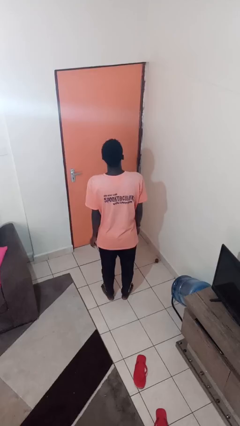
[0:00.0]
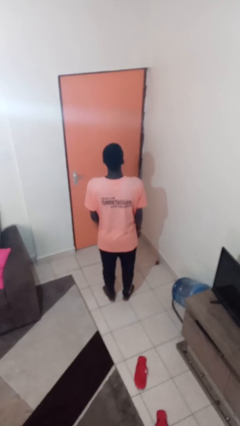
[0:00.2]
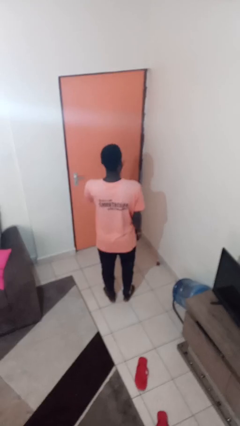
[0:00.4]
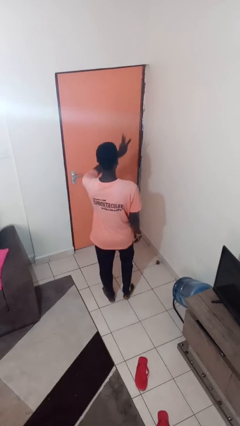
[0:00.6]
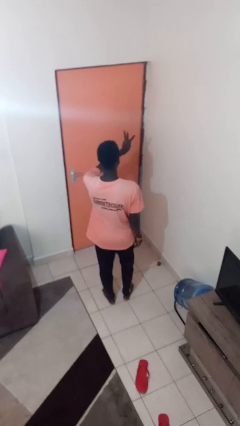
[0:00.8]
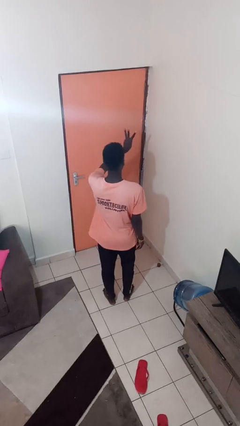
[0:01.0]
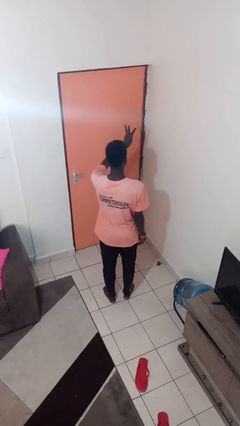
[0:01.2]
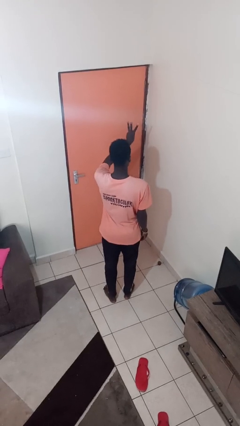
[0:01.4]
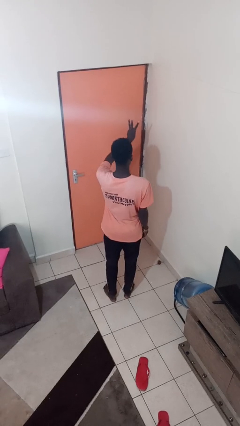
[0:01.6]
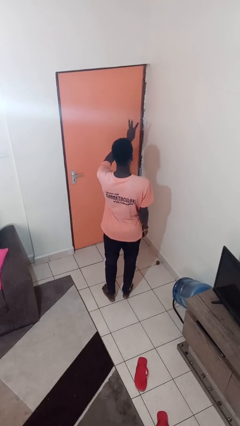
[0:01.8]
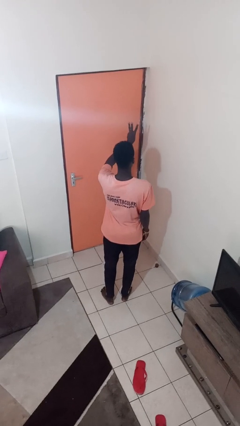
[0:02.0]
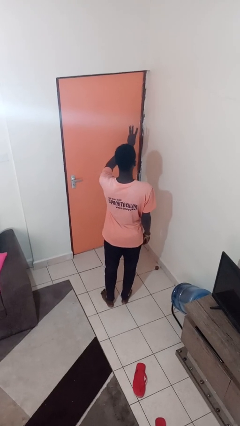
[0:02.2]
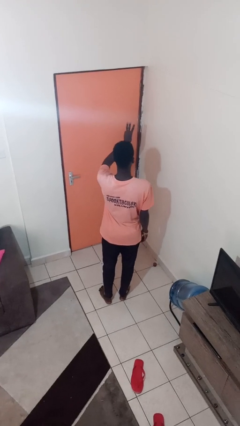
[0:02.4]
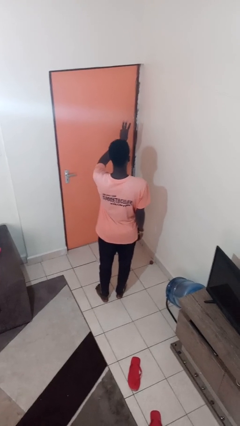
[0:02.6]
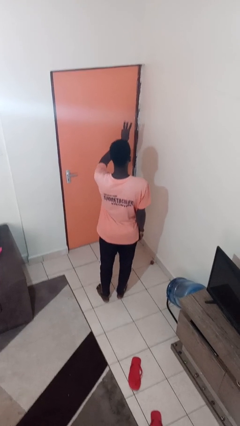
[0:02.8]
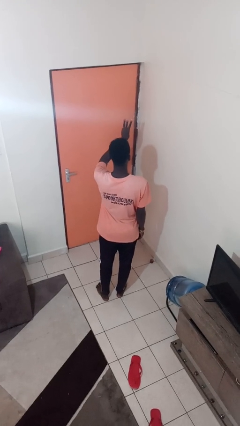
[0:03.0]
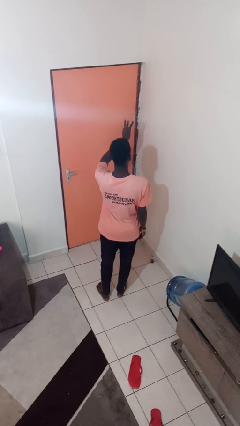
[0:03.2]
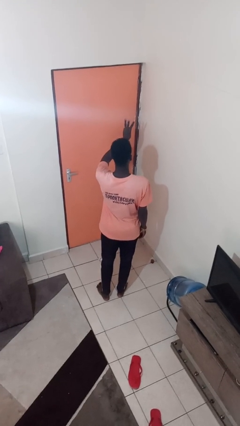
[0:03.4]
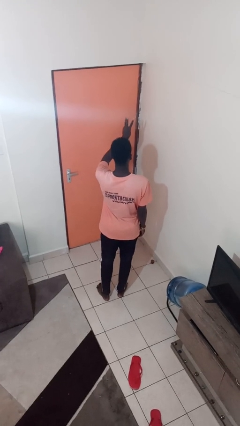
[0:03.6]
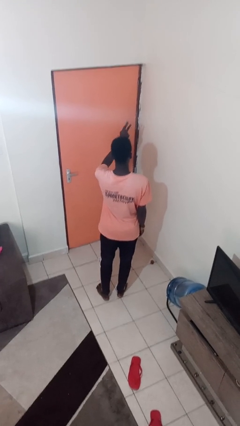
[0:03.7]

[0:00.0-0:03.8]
person gestures number three

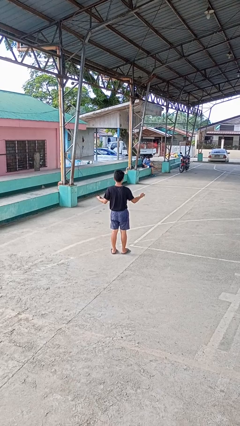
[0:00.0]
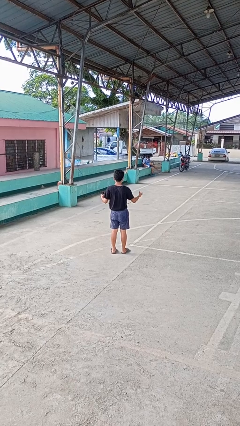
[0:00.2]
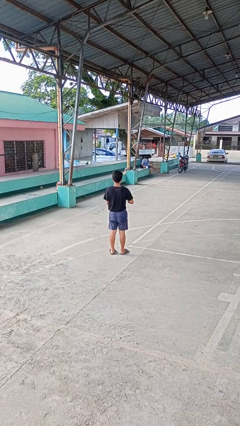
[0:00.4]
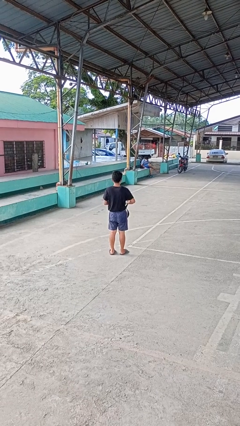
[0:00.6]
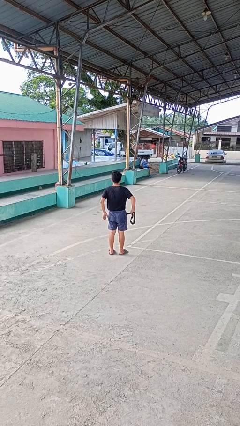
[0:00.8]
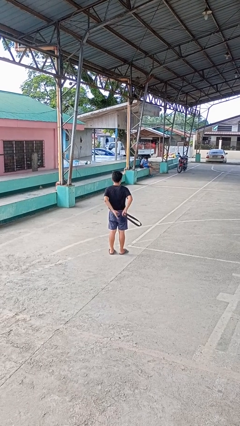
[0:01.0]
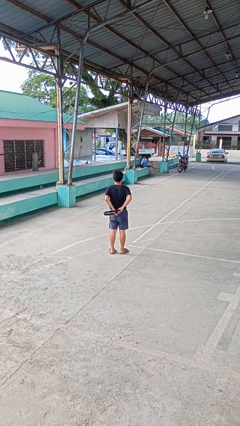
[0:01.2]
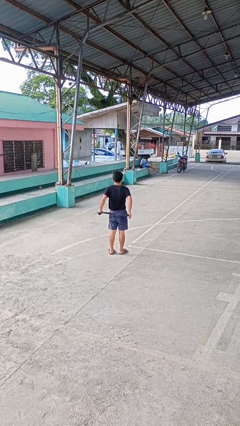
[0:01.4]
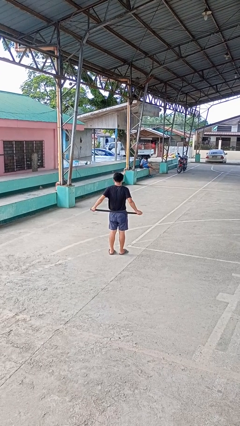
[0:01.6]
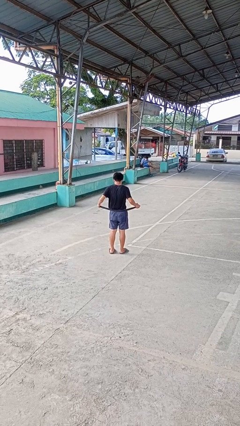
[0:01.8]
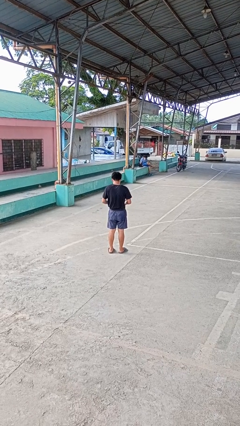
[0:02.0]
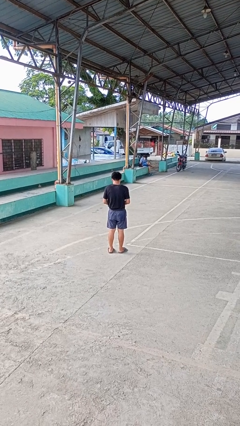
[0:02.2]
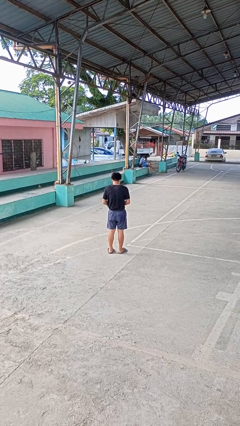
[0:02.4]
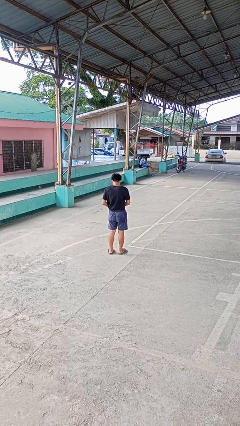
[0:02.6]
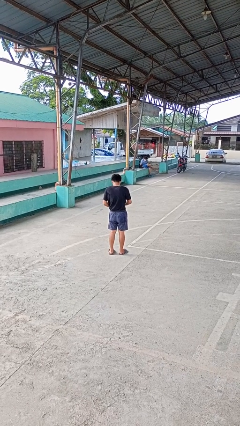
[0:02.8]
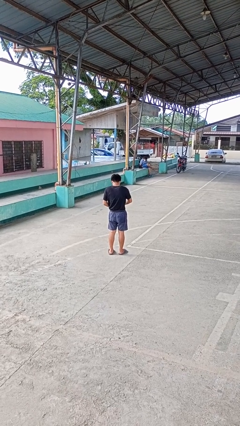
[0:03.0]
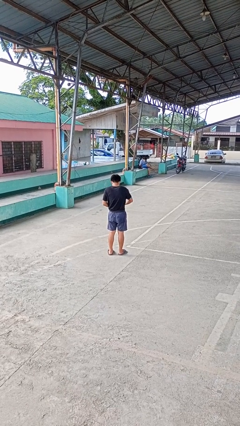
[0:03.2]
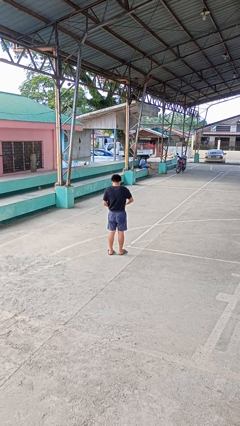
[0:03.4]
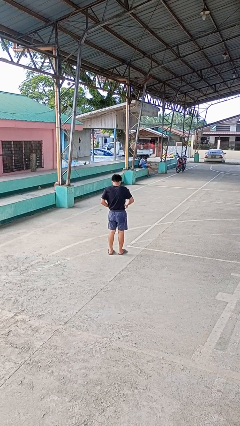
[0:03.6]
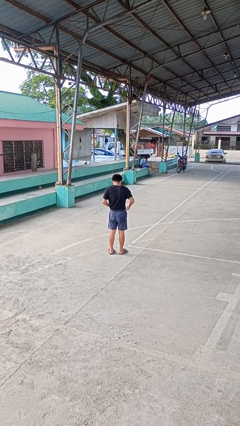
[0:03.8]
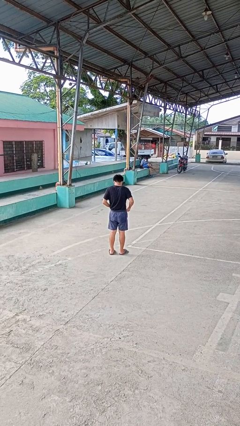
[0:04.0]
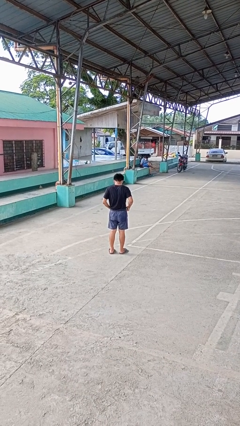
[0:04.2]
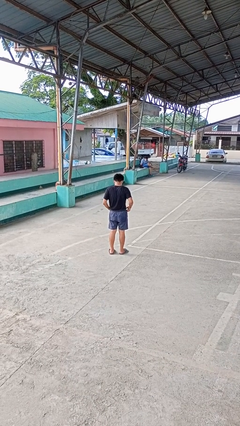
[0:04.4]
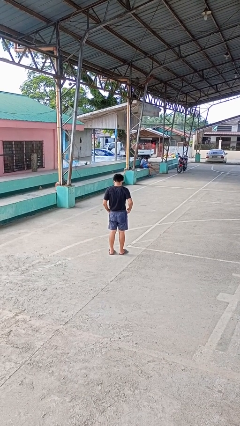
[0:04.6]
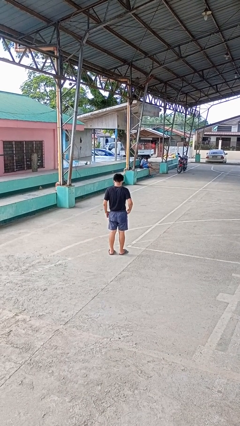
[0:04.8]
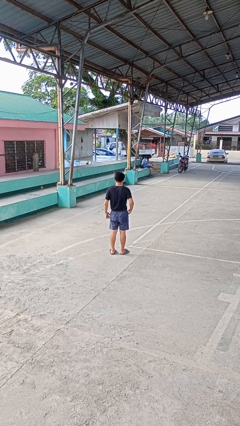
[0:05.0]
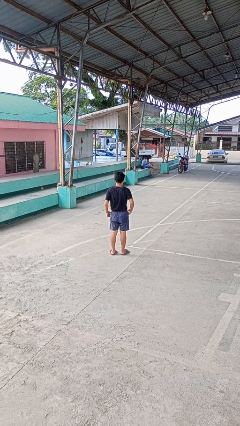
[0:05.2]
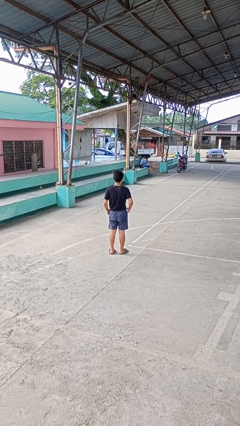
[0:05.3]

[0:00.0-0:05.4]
person puts on belt

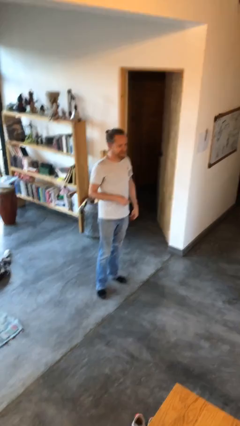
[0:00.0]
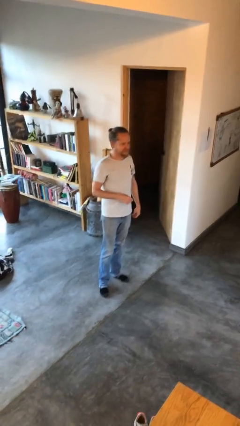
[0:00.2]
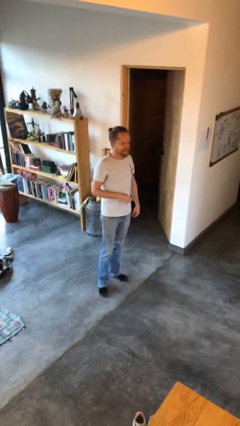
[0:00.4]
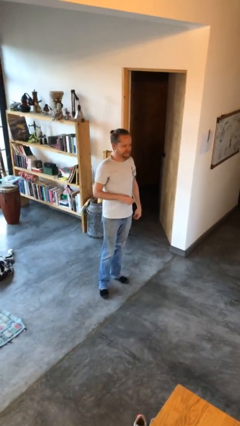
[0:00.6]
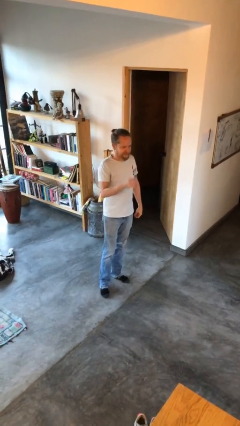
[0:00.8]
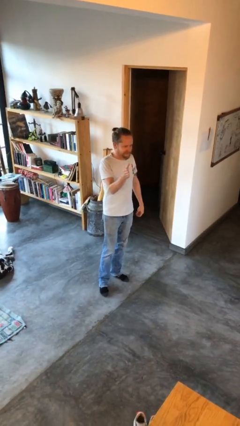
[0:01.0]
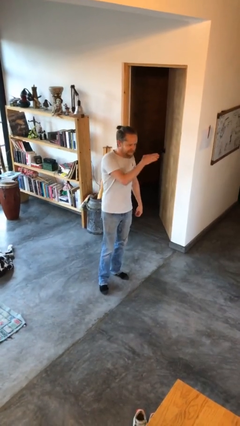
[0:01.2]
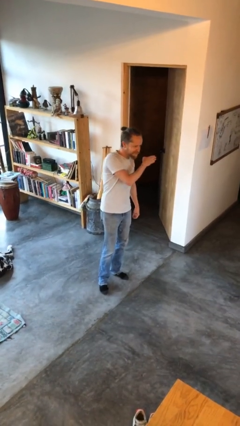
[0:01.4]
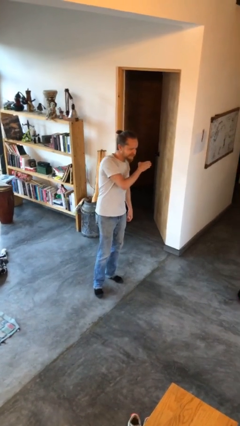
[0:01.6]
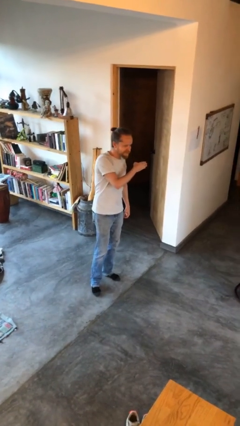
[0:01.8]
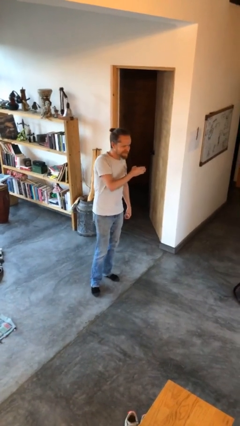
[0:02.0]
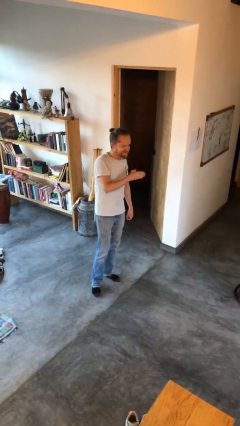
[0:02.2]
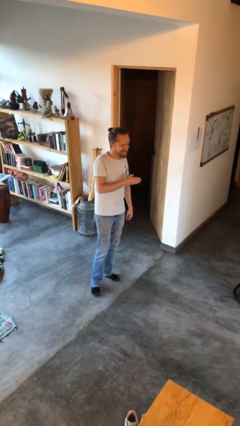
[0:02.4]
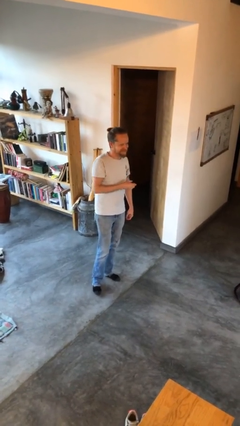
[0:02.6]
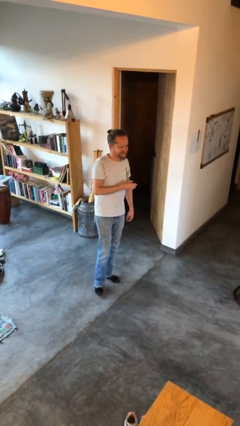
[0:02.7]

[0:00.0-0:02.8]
person gestures swipe left

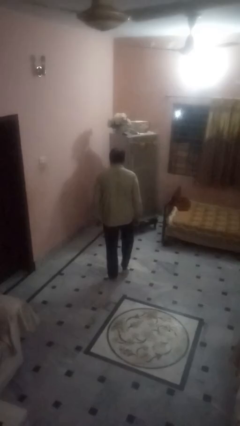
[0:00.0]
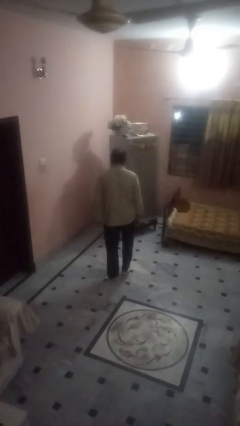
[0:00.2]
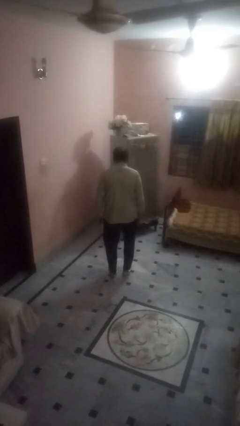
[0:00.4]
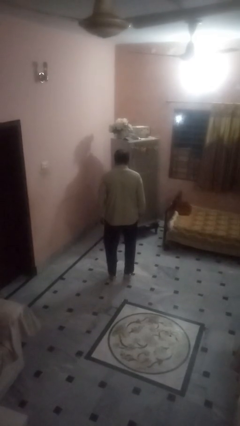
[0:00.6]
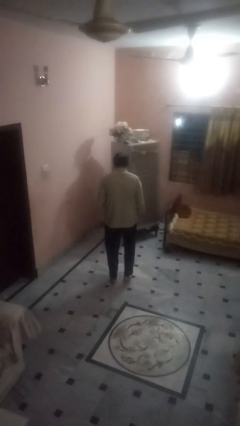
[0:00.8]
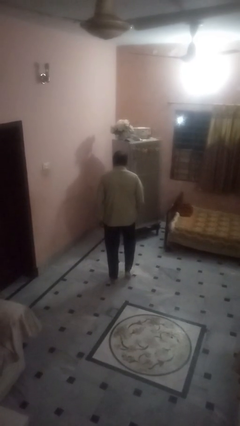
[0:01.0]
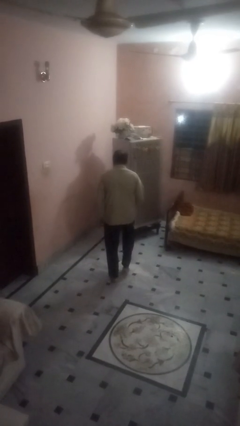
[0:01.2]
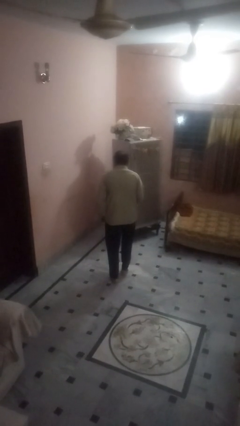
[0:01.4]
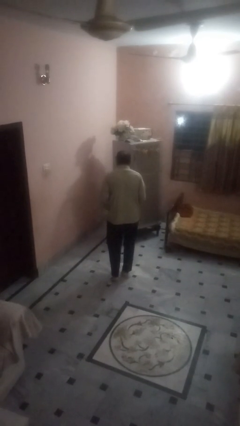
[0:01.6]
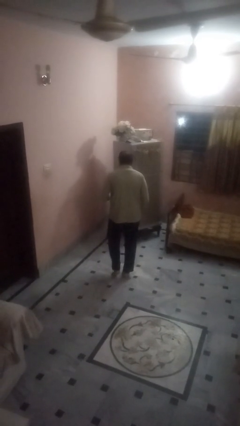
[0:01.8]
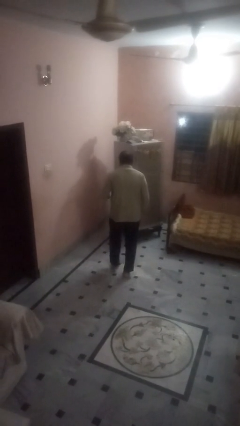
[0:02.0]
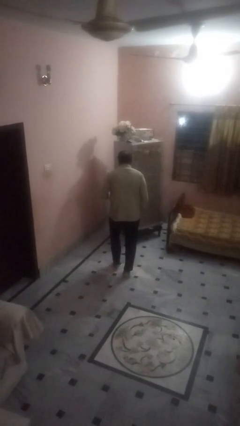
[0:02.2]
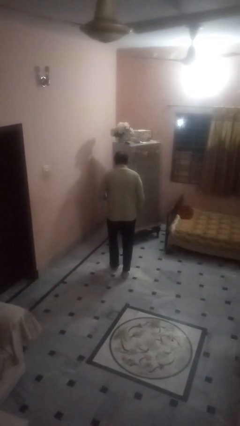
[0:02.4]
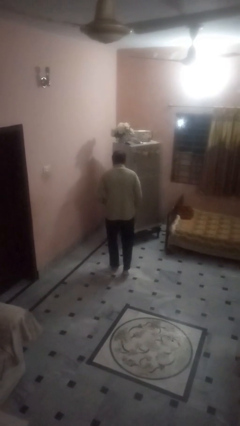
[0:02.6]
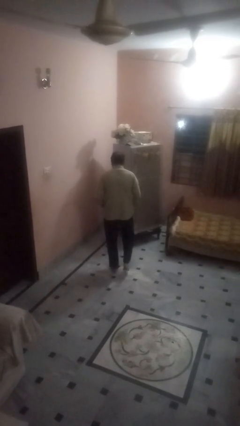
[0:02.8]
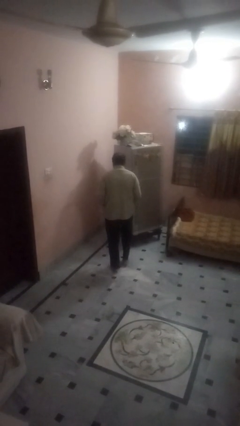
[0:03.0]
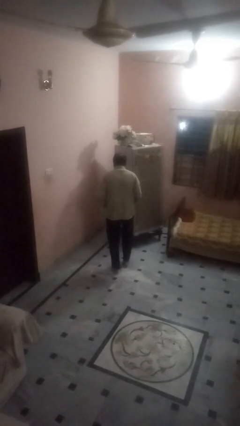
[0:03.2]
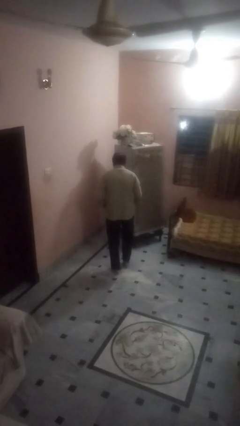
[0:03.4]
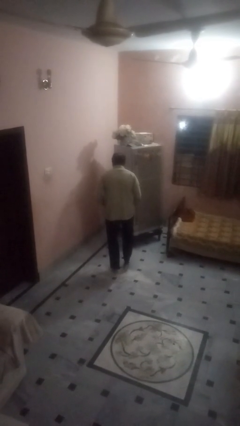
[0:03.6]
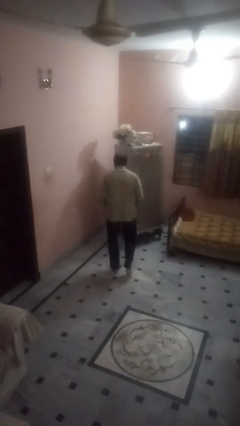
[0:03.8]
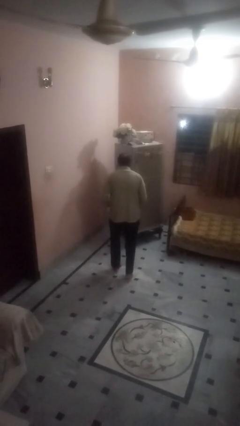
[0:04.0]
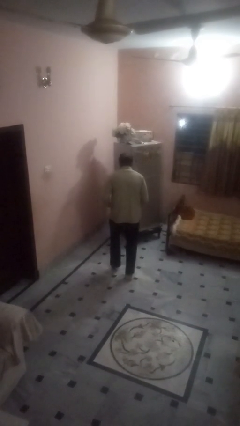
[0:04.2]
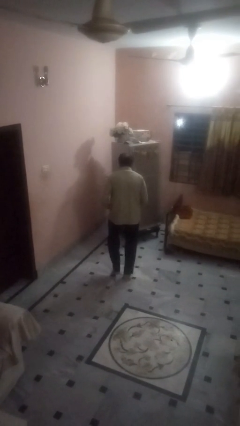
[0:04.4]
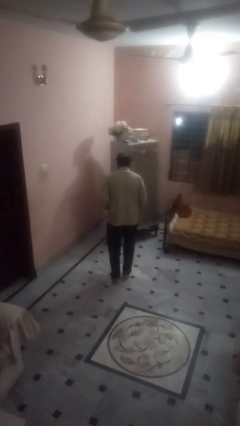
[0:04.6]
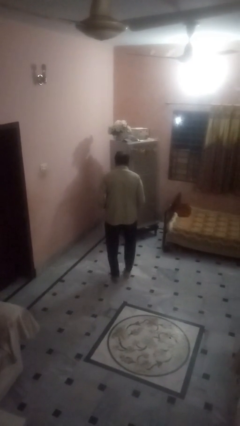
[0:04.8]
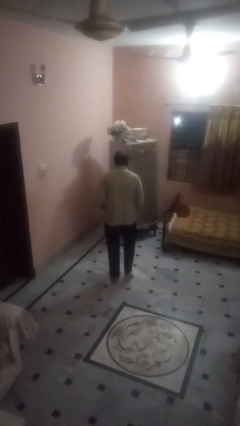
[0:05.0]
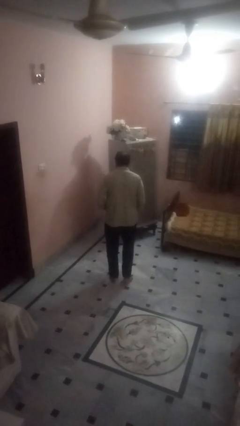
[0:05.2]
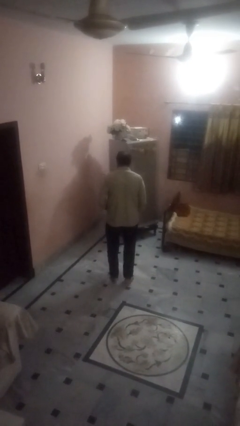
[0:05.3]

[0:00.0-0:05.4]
person walks tiptoe

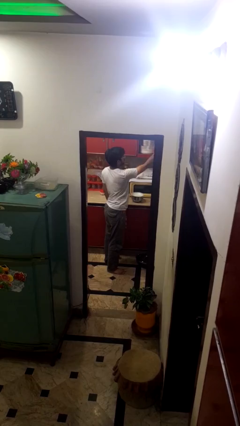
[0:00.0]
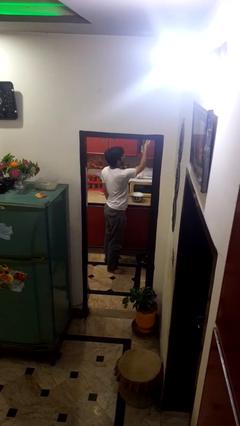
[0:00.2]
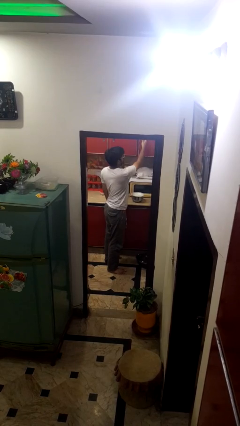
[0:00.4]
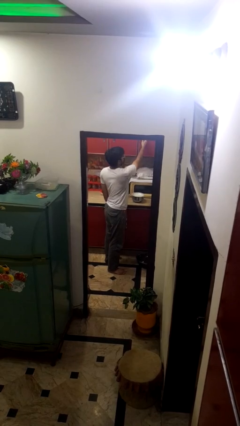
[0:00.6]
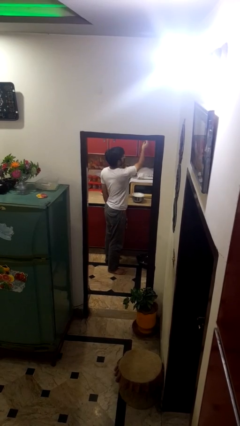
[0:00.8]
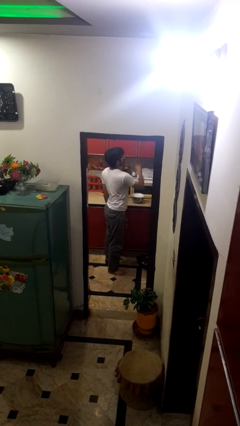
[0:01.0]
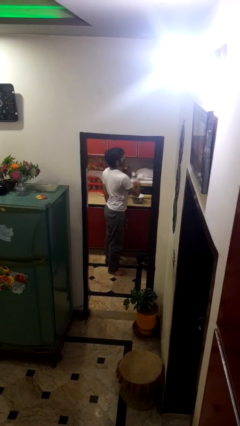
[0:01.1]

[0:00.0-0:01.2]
person closes cabinet
